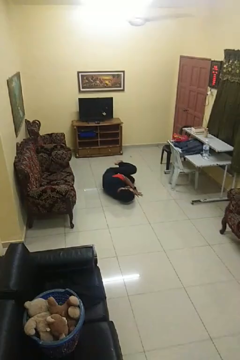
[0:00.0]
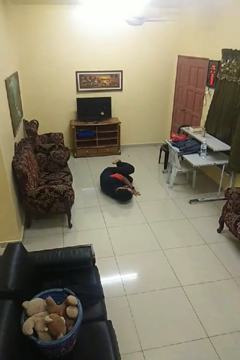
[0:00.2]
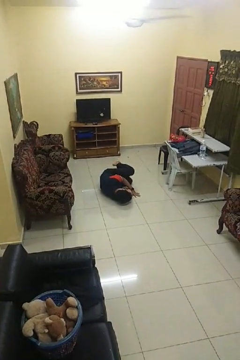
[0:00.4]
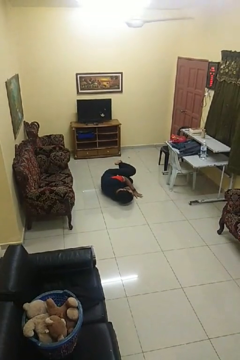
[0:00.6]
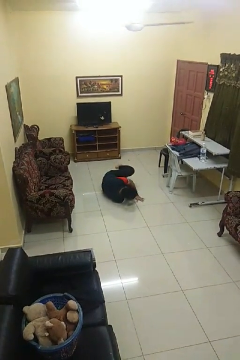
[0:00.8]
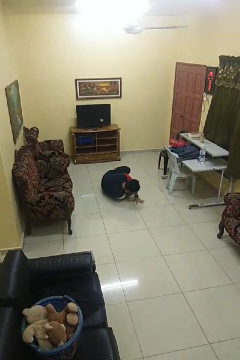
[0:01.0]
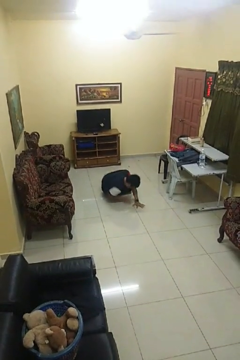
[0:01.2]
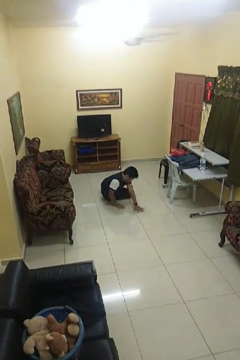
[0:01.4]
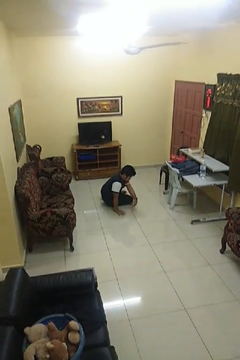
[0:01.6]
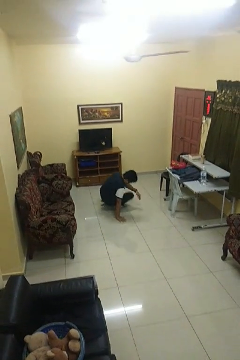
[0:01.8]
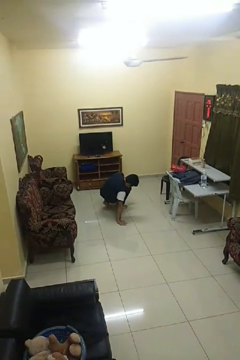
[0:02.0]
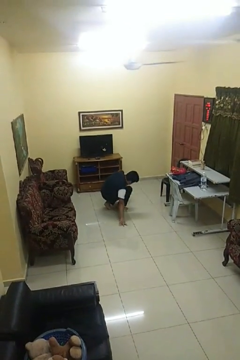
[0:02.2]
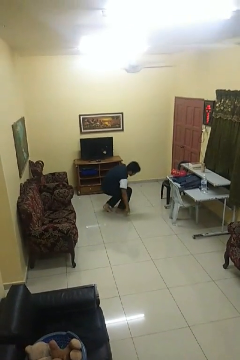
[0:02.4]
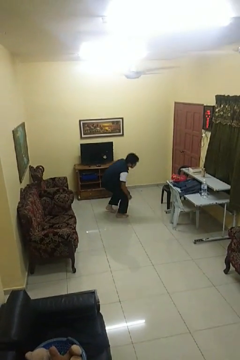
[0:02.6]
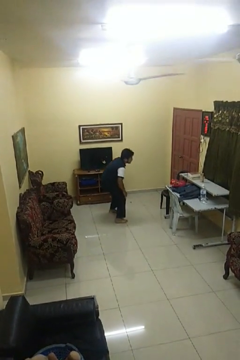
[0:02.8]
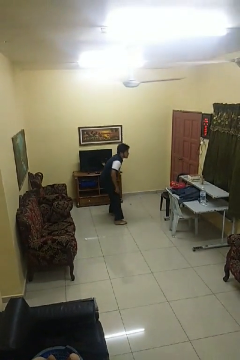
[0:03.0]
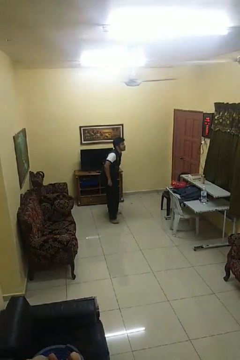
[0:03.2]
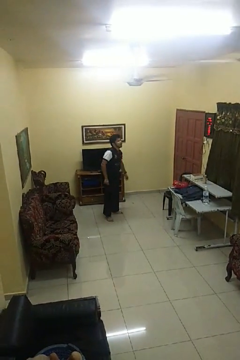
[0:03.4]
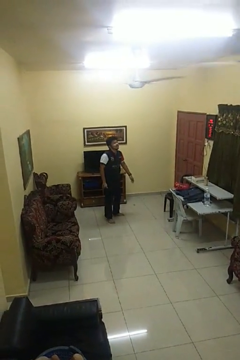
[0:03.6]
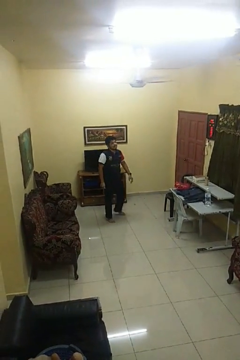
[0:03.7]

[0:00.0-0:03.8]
person stands up from floor

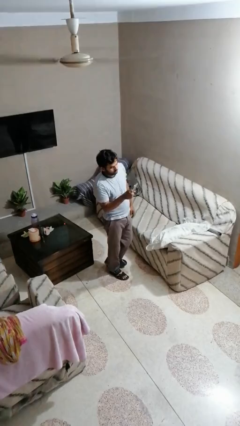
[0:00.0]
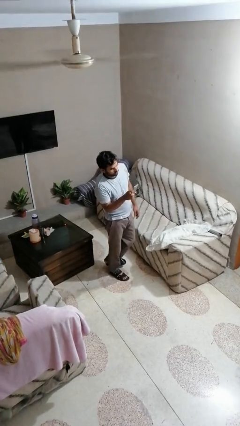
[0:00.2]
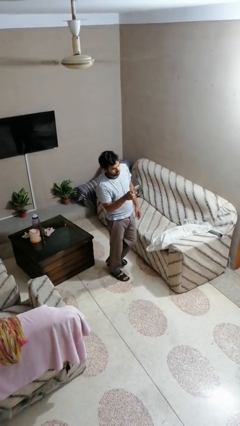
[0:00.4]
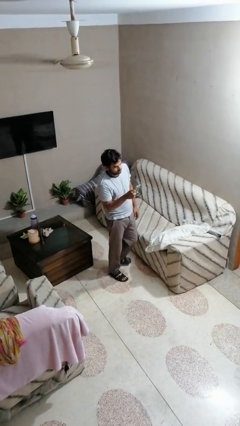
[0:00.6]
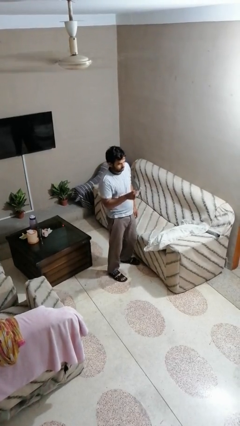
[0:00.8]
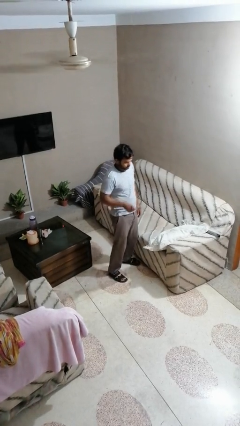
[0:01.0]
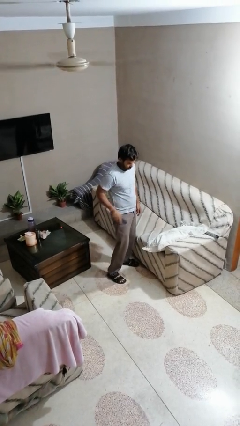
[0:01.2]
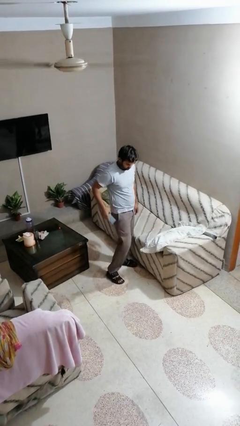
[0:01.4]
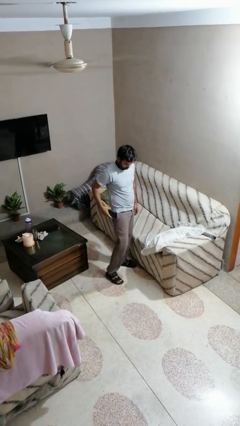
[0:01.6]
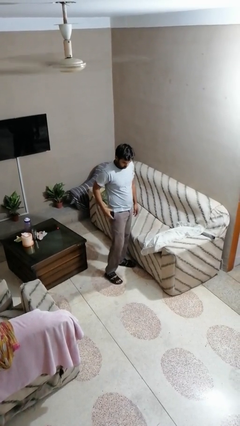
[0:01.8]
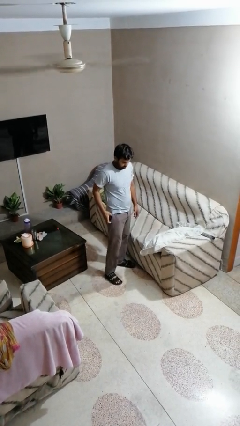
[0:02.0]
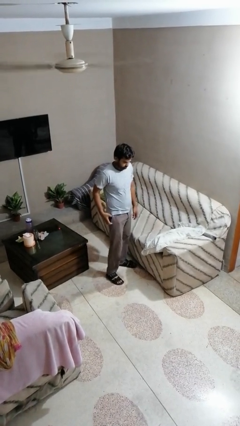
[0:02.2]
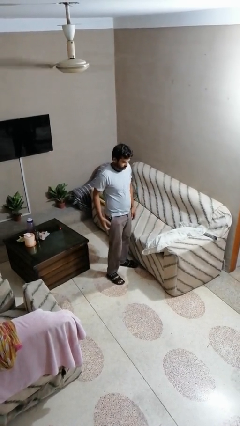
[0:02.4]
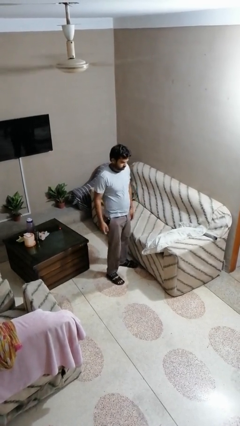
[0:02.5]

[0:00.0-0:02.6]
person puts phone into pocket

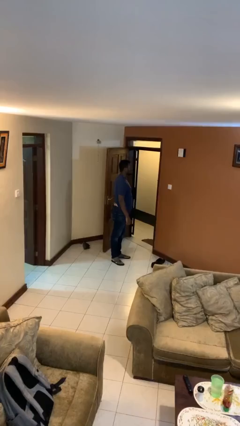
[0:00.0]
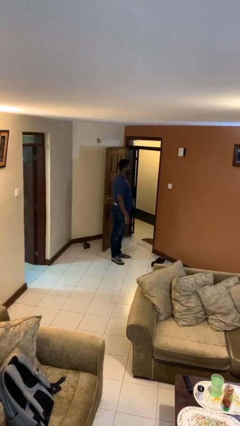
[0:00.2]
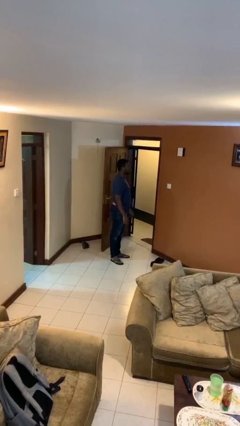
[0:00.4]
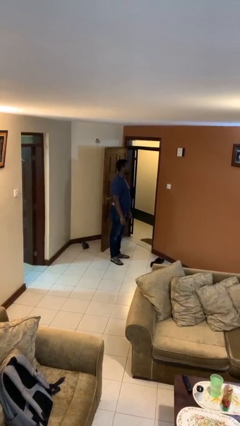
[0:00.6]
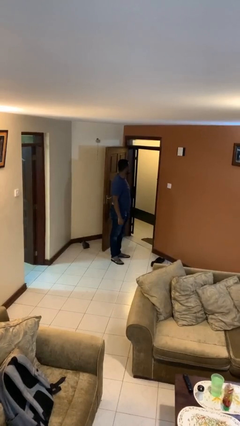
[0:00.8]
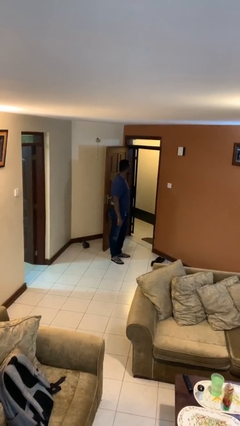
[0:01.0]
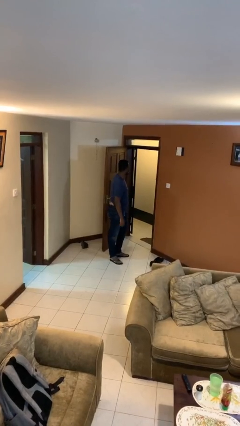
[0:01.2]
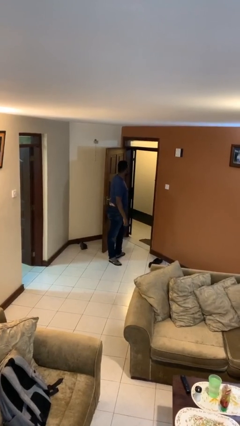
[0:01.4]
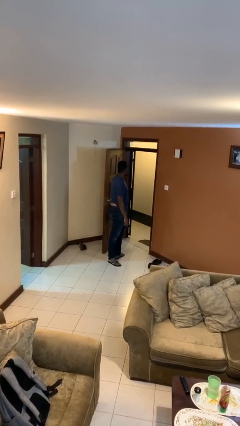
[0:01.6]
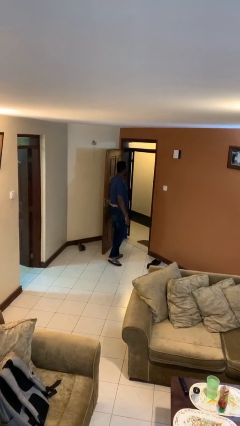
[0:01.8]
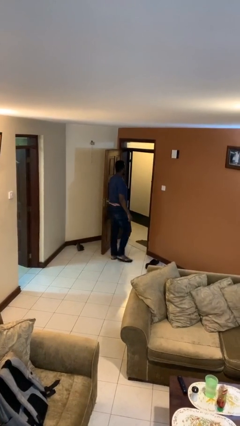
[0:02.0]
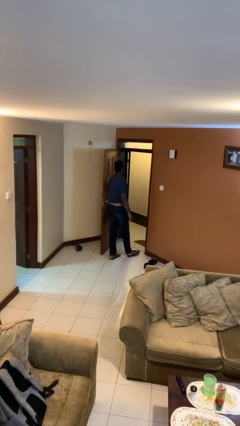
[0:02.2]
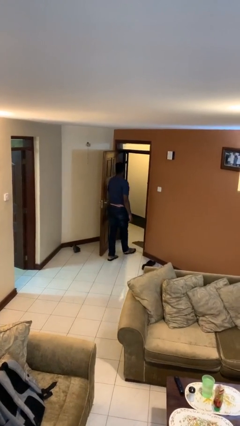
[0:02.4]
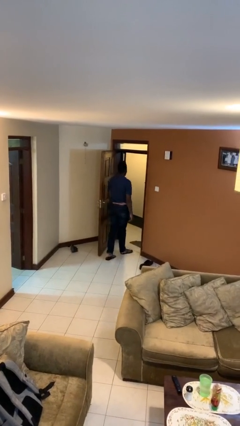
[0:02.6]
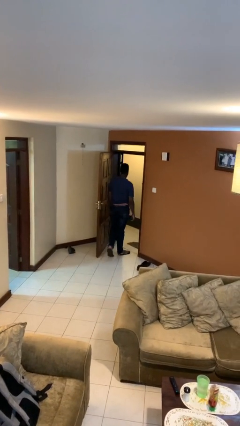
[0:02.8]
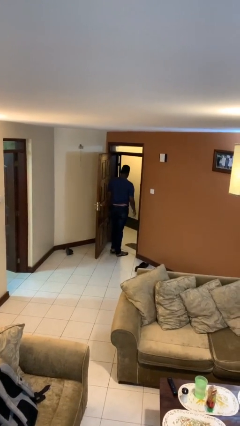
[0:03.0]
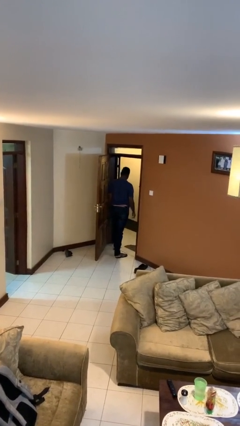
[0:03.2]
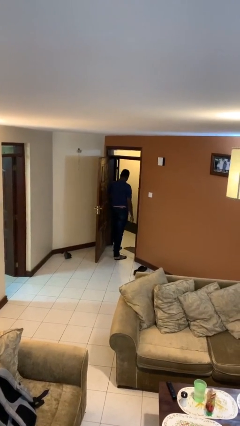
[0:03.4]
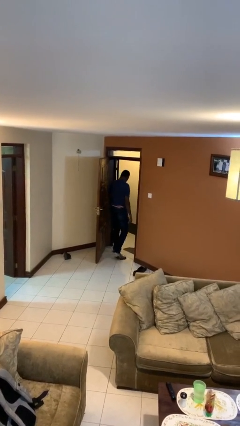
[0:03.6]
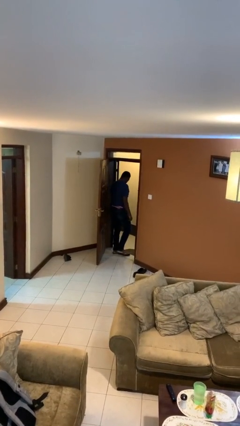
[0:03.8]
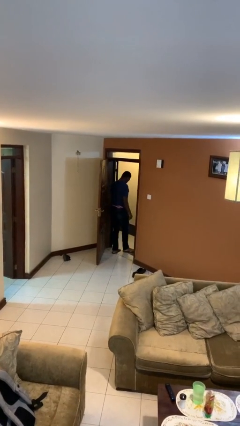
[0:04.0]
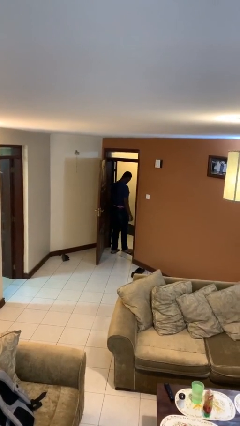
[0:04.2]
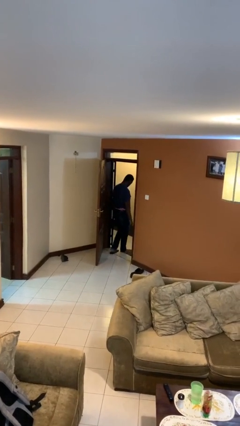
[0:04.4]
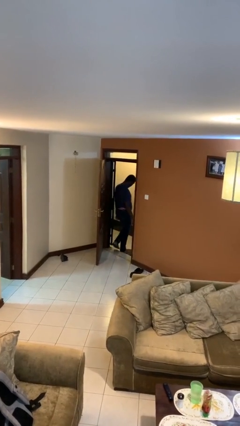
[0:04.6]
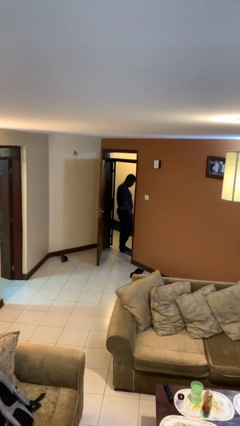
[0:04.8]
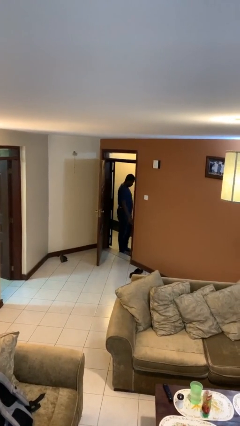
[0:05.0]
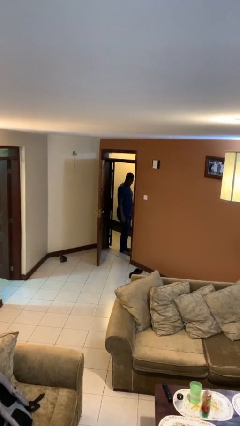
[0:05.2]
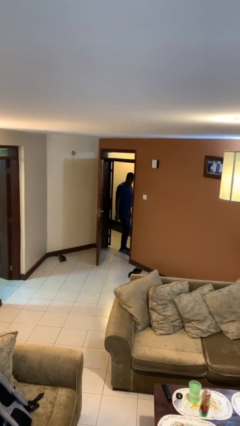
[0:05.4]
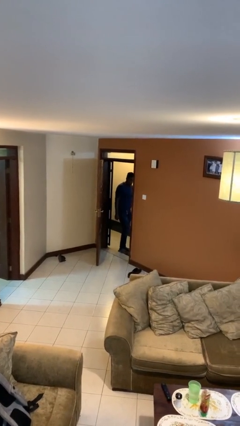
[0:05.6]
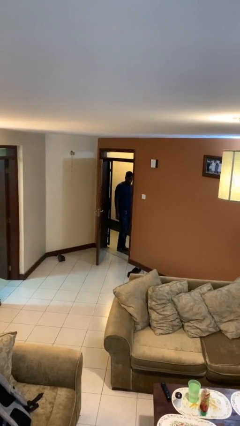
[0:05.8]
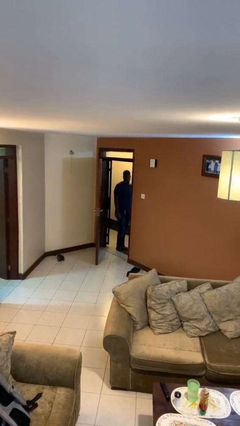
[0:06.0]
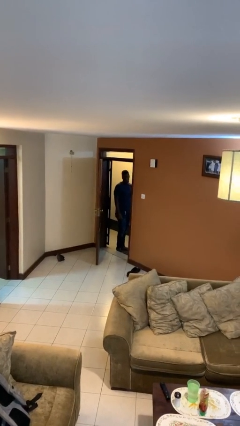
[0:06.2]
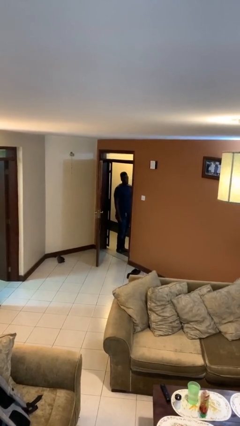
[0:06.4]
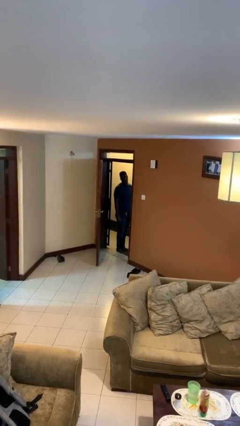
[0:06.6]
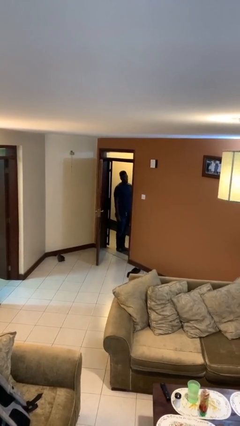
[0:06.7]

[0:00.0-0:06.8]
person exits scene through structure

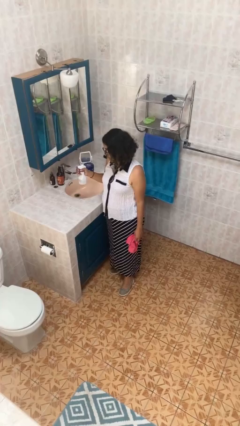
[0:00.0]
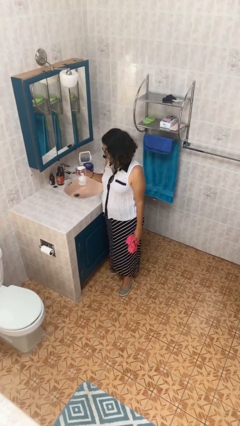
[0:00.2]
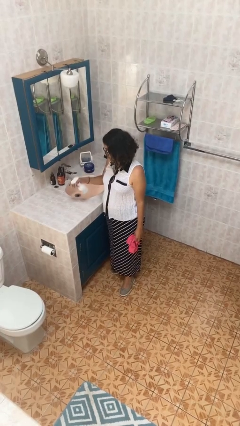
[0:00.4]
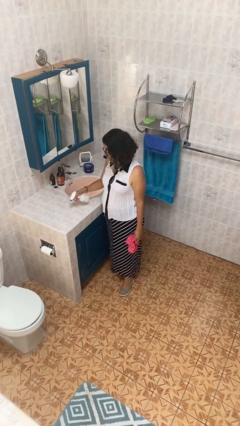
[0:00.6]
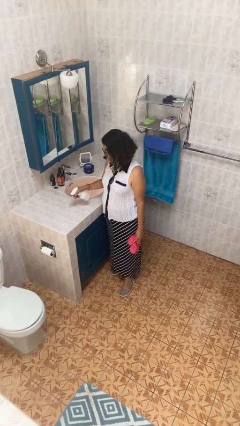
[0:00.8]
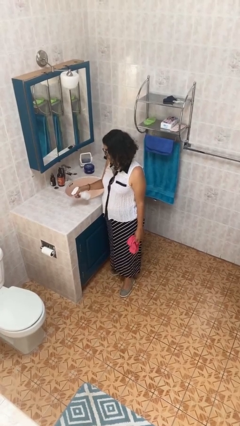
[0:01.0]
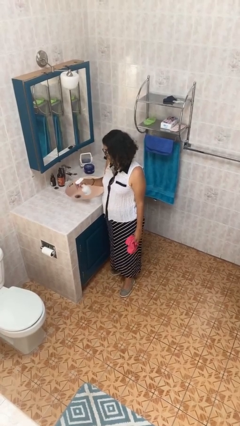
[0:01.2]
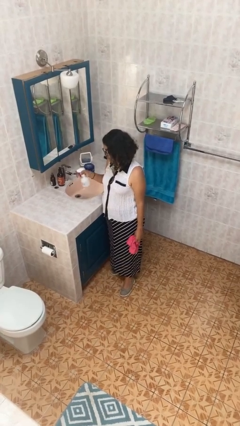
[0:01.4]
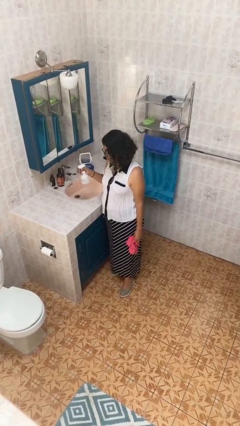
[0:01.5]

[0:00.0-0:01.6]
person sprays from bottle

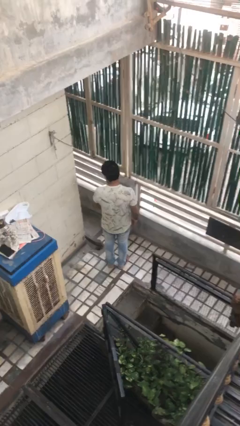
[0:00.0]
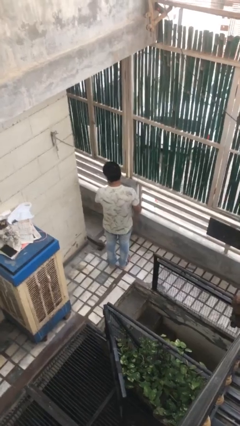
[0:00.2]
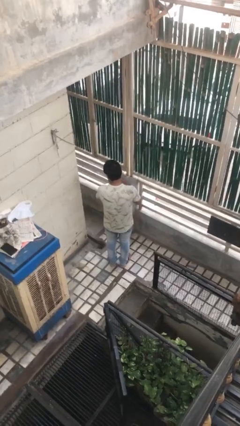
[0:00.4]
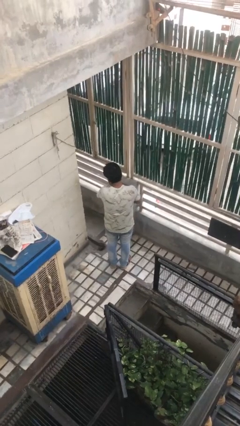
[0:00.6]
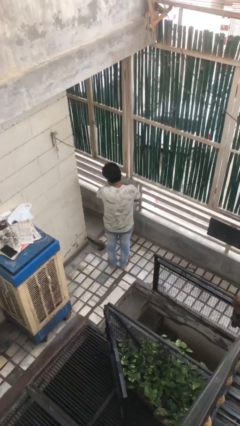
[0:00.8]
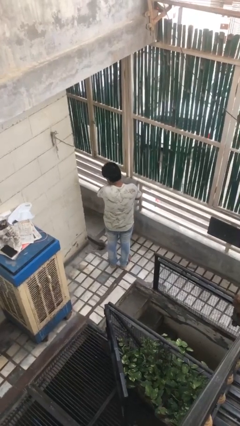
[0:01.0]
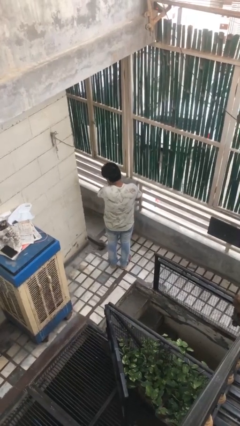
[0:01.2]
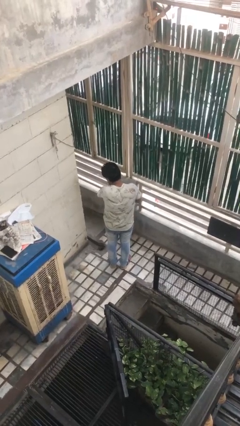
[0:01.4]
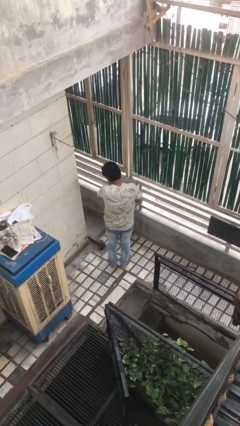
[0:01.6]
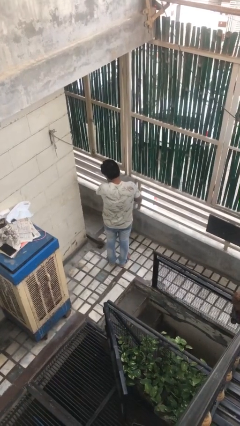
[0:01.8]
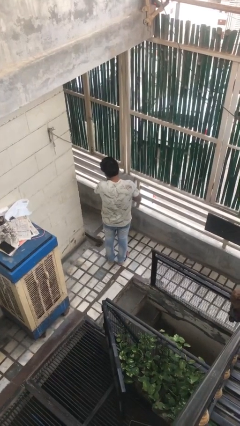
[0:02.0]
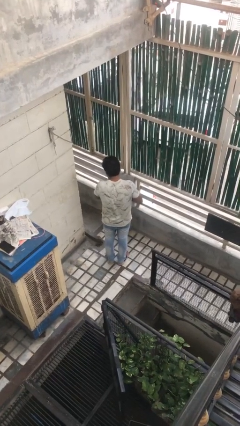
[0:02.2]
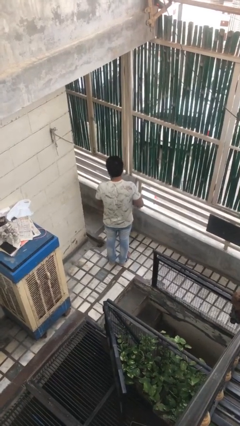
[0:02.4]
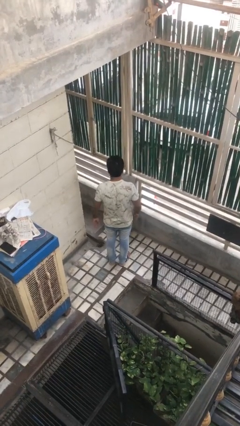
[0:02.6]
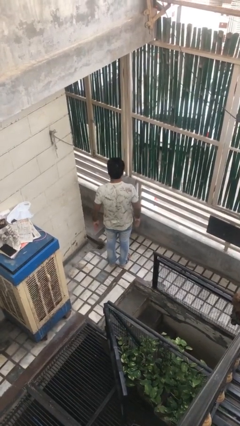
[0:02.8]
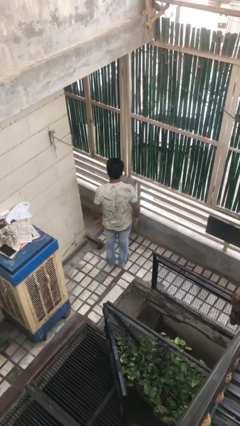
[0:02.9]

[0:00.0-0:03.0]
person swats bug

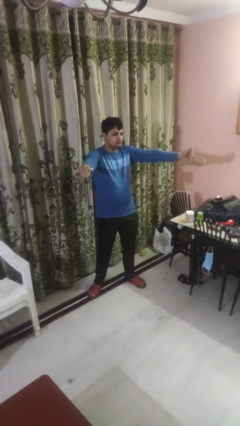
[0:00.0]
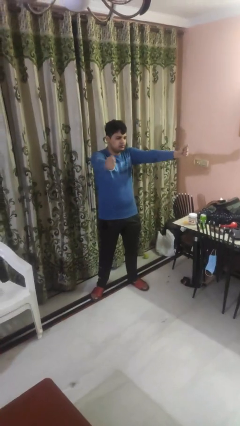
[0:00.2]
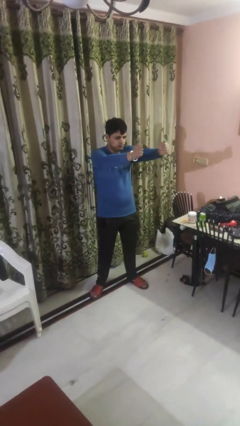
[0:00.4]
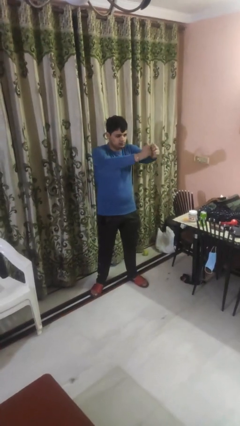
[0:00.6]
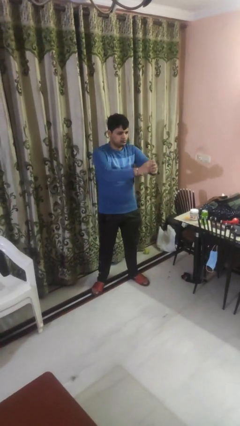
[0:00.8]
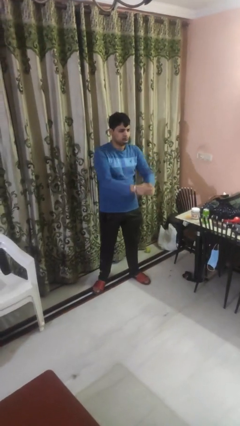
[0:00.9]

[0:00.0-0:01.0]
person gestures zoom out
